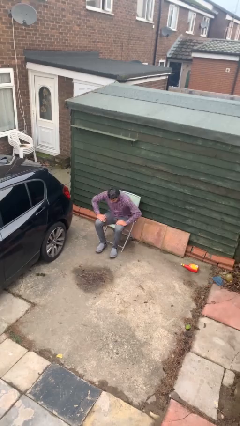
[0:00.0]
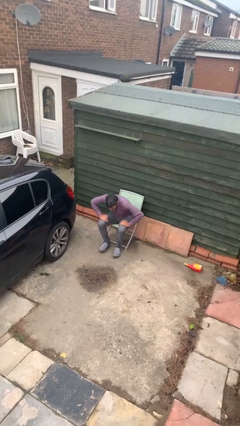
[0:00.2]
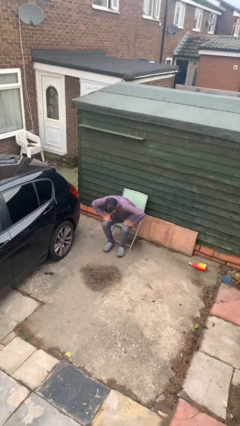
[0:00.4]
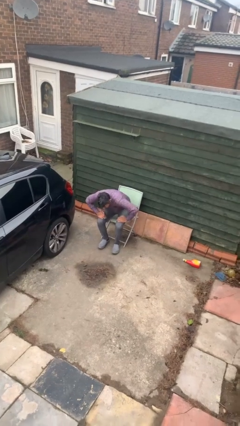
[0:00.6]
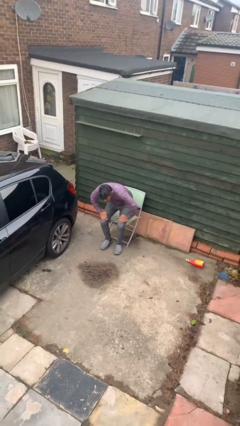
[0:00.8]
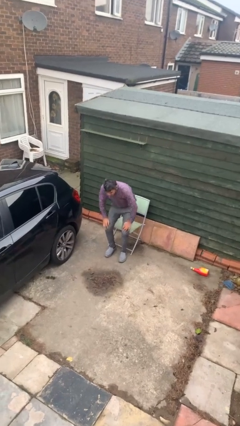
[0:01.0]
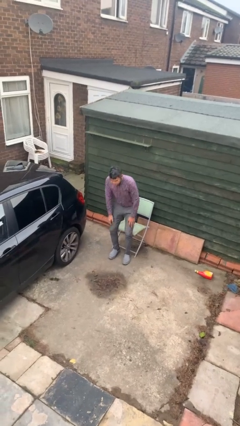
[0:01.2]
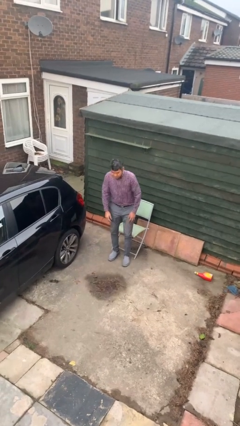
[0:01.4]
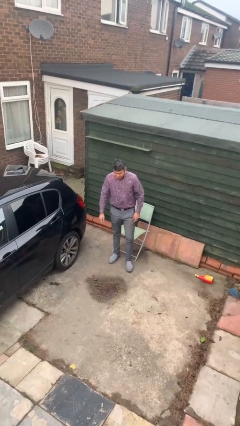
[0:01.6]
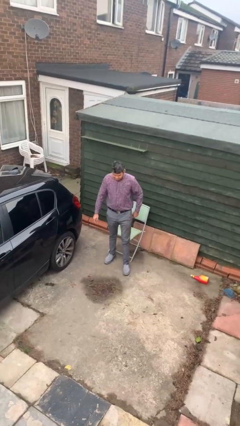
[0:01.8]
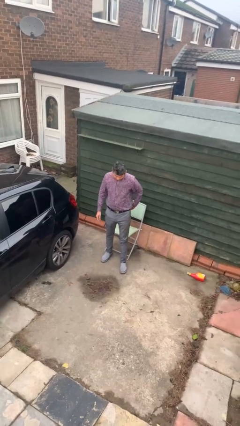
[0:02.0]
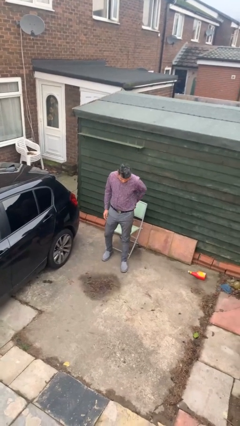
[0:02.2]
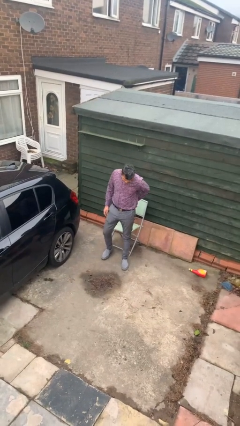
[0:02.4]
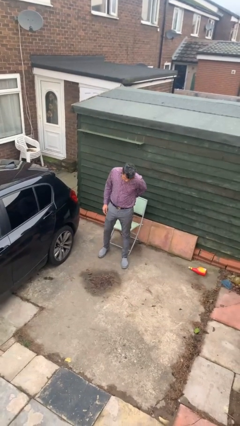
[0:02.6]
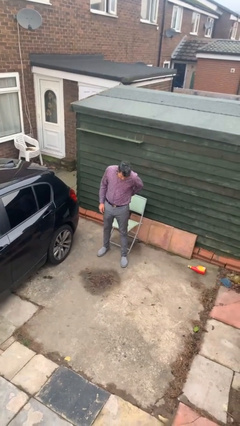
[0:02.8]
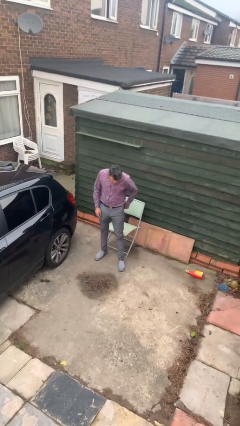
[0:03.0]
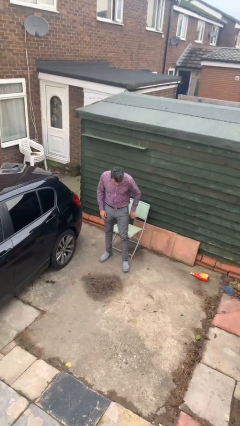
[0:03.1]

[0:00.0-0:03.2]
person stands up

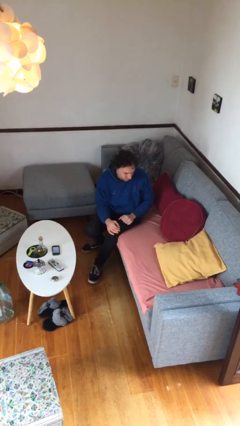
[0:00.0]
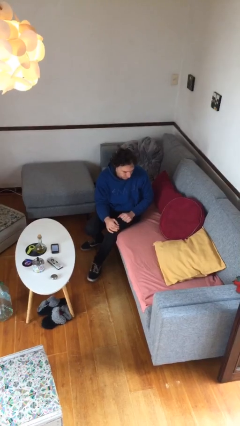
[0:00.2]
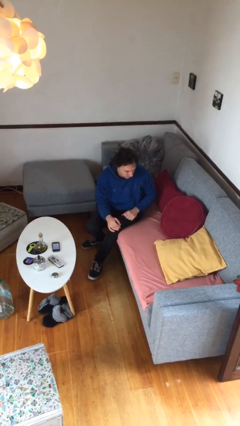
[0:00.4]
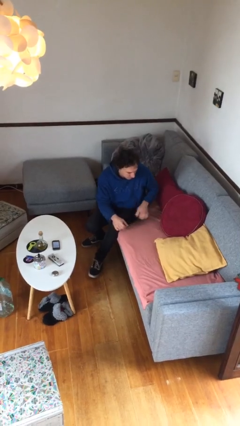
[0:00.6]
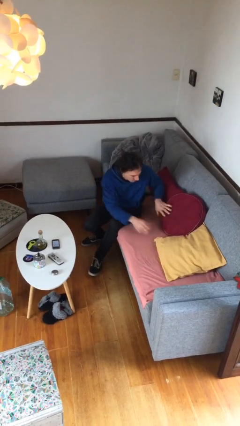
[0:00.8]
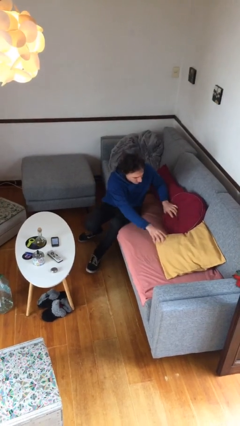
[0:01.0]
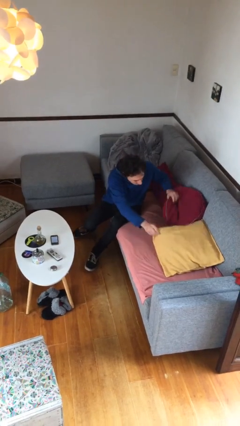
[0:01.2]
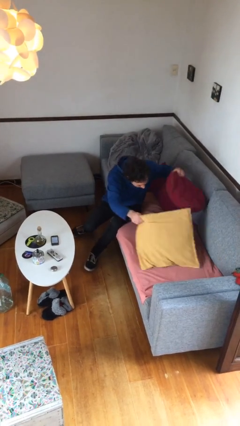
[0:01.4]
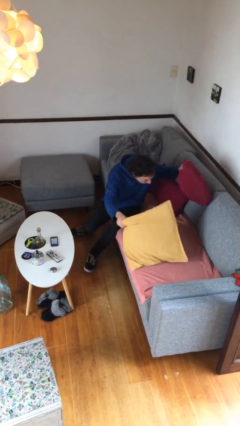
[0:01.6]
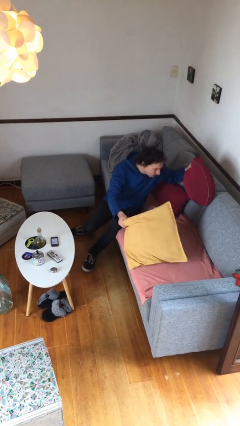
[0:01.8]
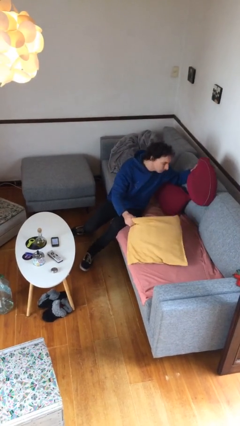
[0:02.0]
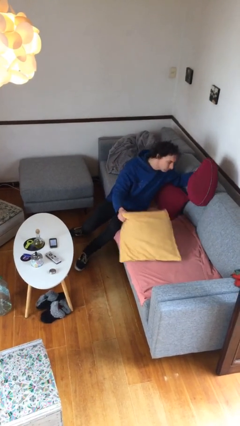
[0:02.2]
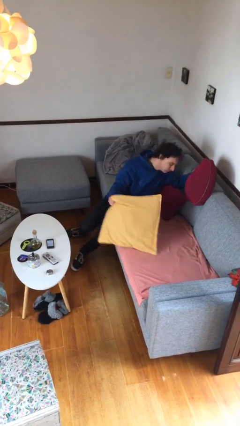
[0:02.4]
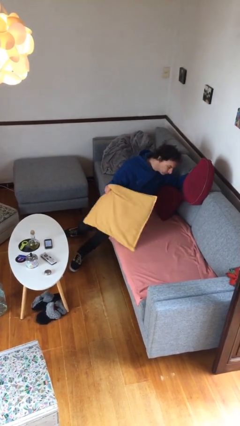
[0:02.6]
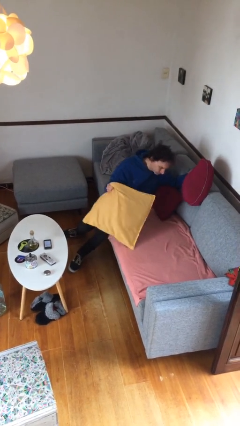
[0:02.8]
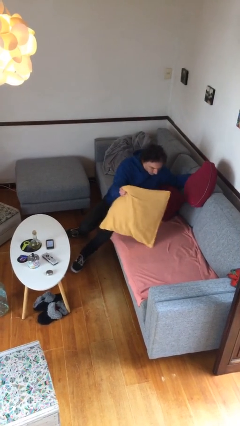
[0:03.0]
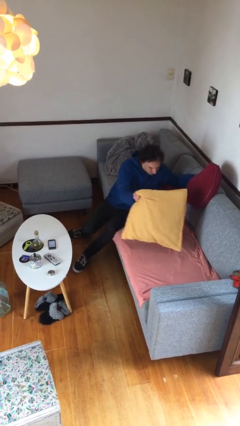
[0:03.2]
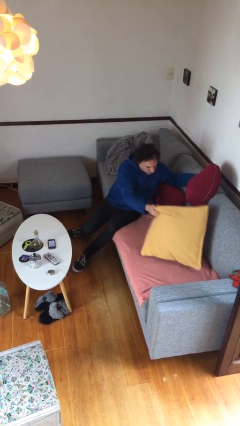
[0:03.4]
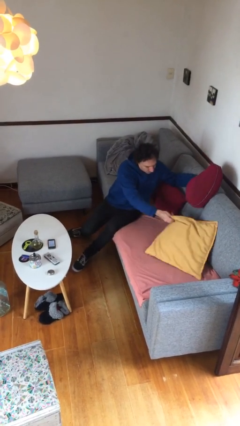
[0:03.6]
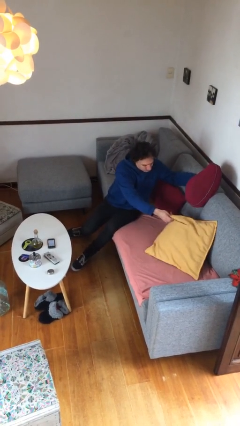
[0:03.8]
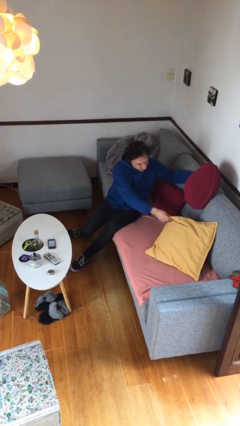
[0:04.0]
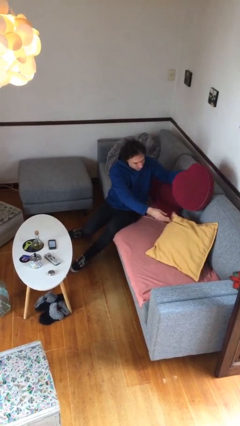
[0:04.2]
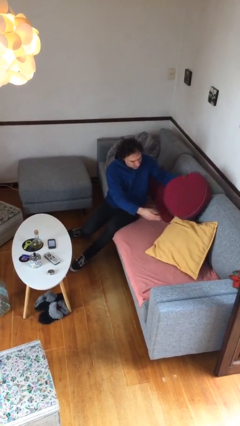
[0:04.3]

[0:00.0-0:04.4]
person searches in couch

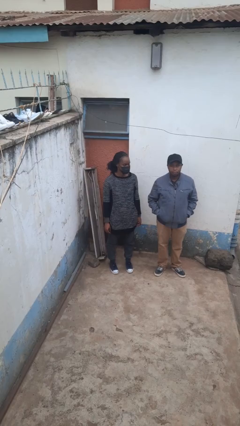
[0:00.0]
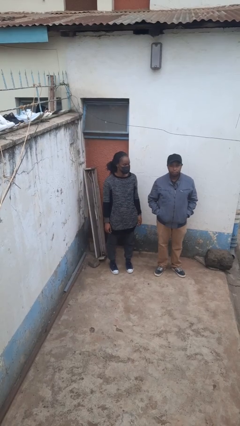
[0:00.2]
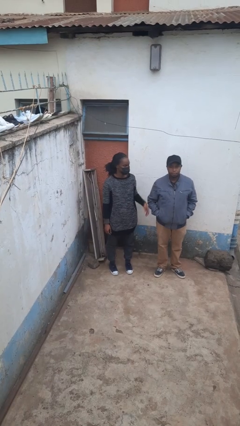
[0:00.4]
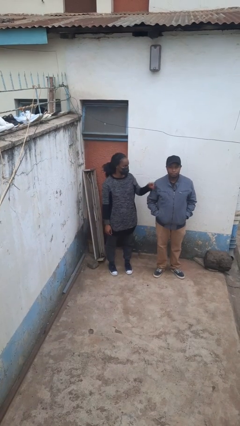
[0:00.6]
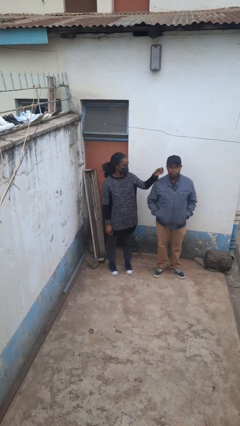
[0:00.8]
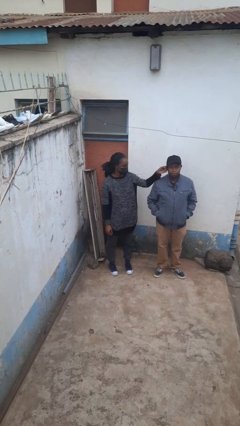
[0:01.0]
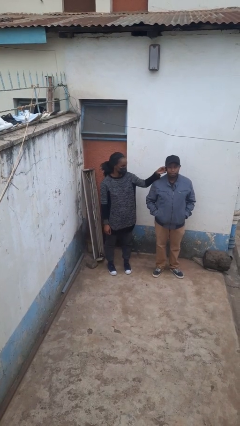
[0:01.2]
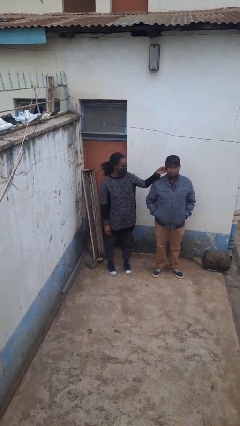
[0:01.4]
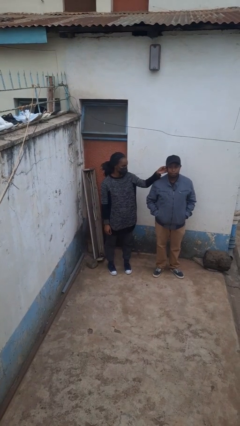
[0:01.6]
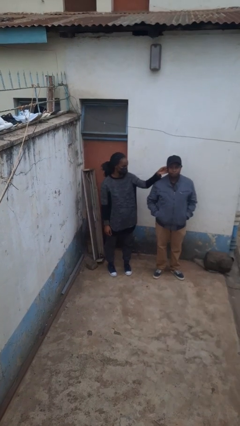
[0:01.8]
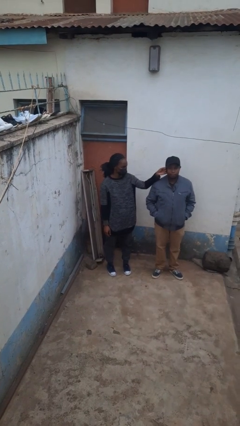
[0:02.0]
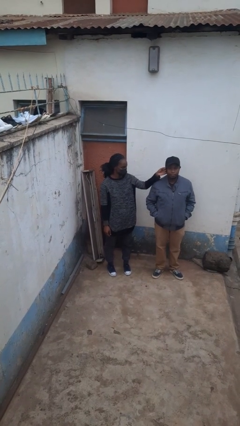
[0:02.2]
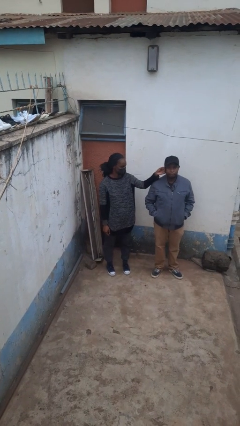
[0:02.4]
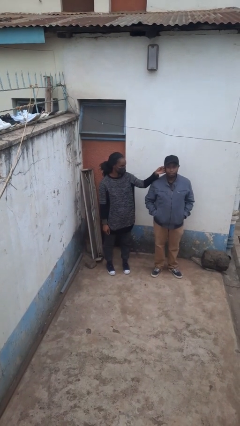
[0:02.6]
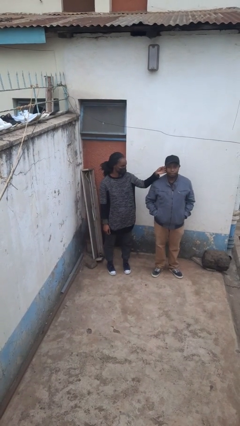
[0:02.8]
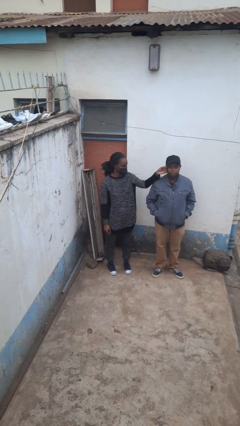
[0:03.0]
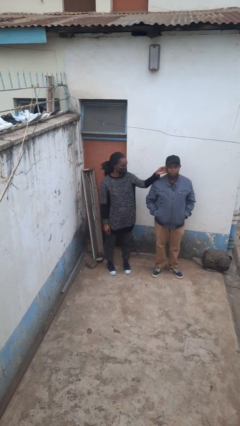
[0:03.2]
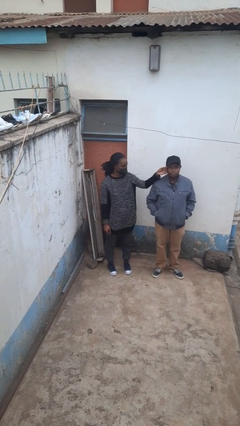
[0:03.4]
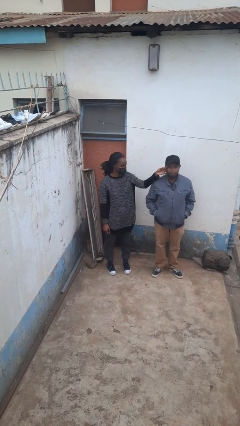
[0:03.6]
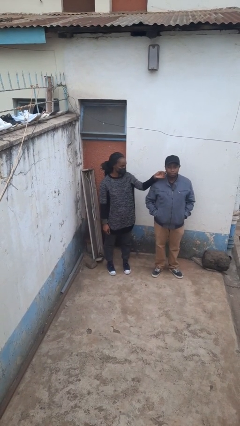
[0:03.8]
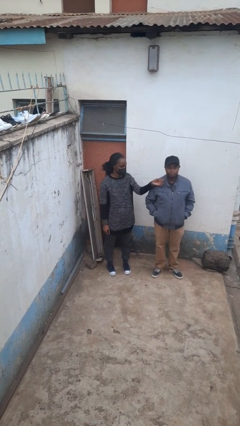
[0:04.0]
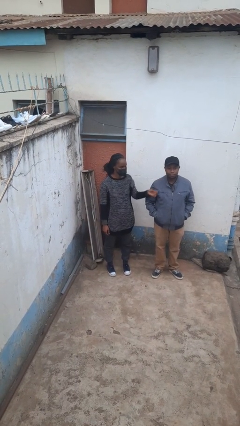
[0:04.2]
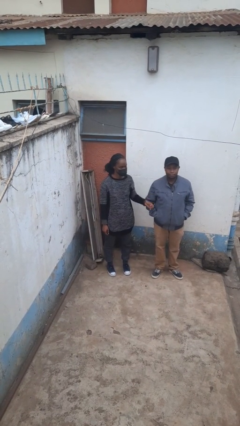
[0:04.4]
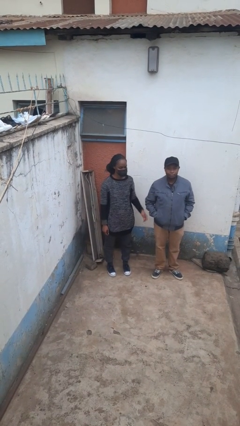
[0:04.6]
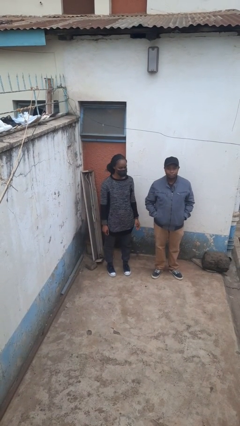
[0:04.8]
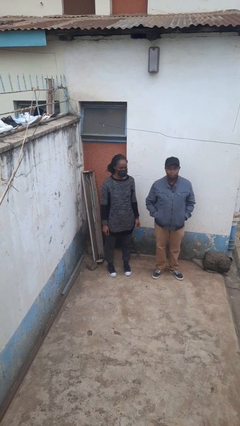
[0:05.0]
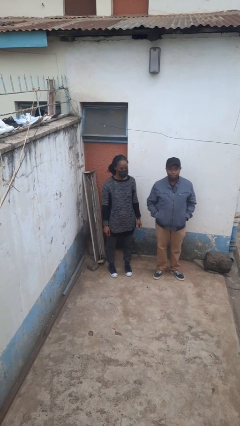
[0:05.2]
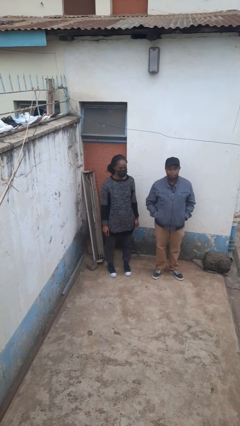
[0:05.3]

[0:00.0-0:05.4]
person touches face of person

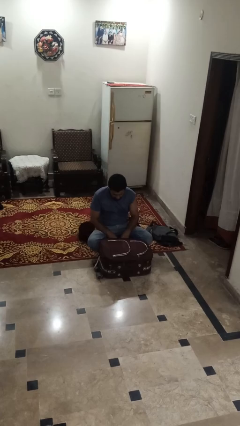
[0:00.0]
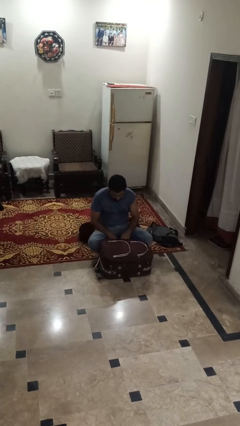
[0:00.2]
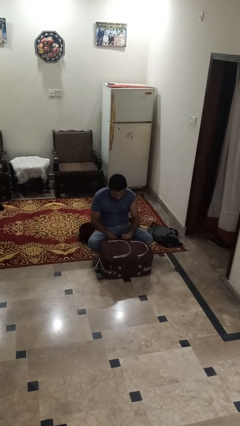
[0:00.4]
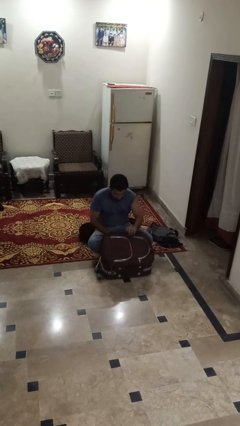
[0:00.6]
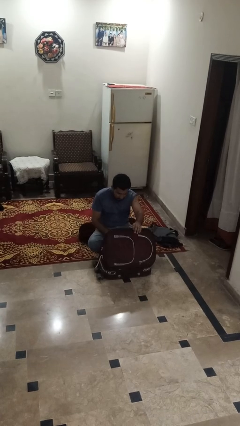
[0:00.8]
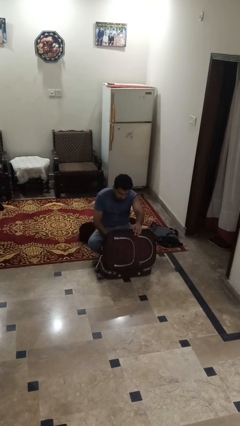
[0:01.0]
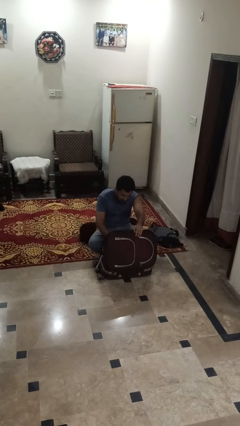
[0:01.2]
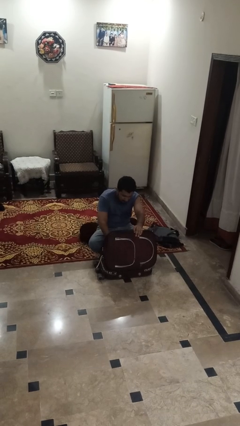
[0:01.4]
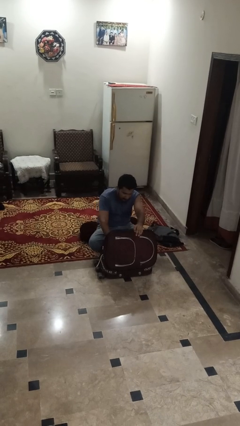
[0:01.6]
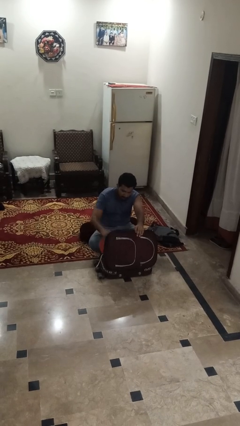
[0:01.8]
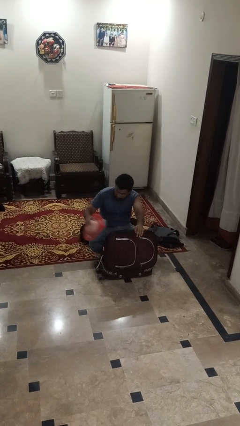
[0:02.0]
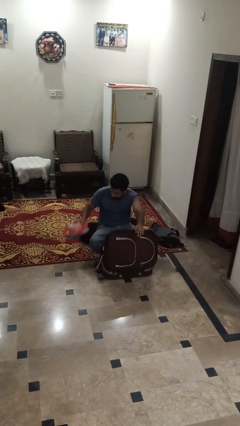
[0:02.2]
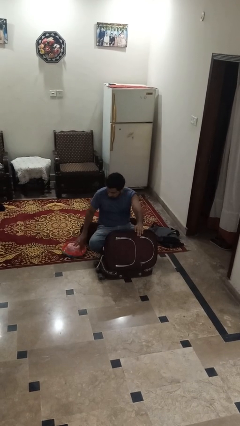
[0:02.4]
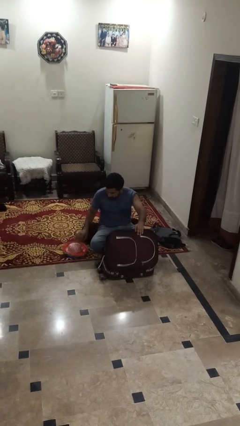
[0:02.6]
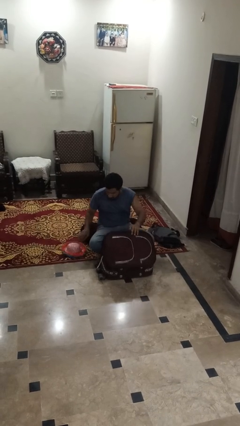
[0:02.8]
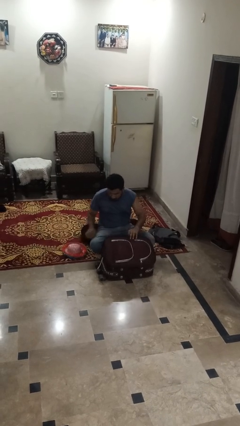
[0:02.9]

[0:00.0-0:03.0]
person unloads clothes from suitcase

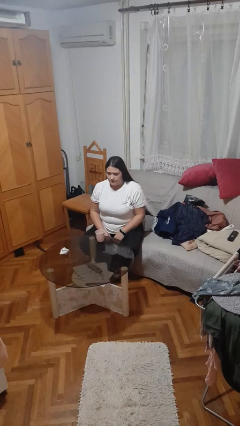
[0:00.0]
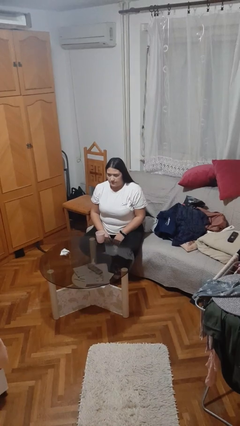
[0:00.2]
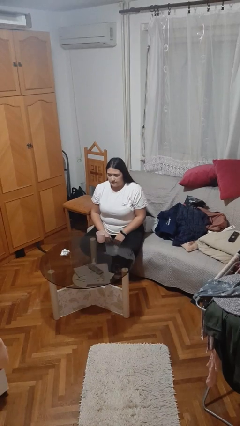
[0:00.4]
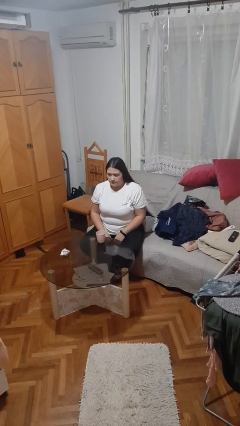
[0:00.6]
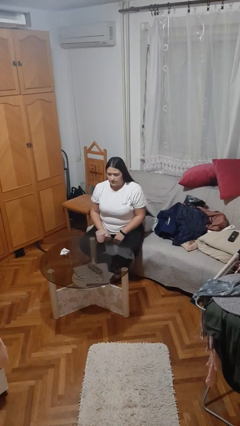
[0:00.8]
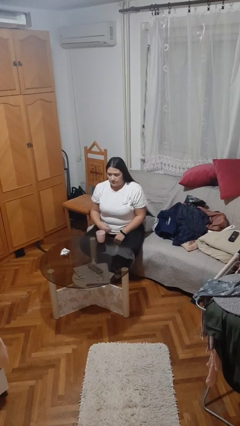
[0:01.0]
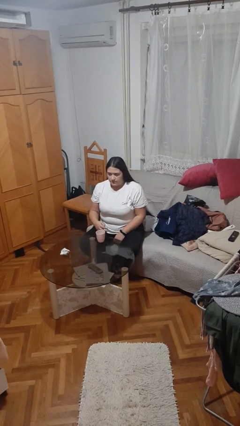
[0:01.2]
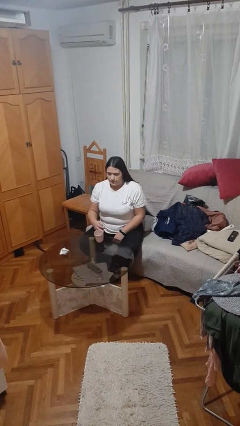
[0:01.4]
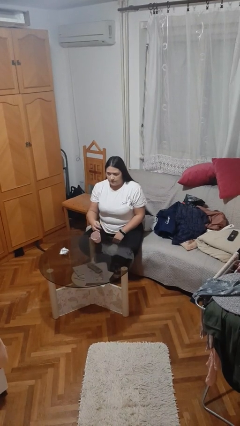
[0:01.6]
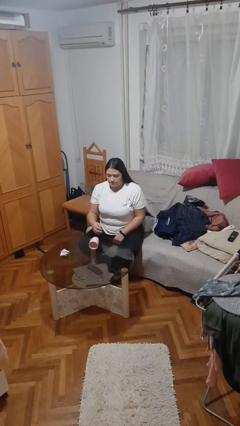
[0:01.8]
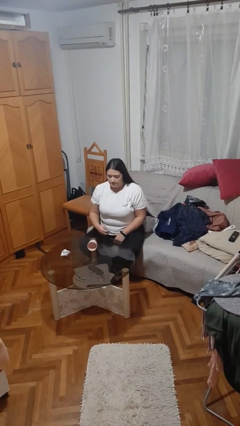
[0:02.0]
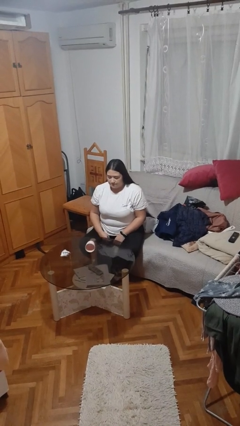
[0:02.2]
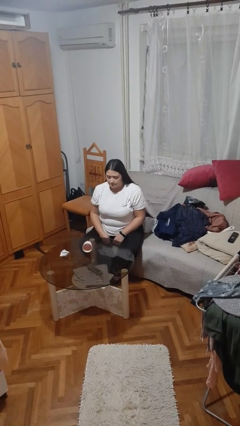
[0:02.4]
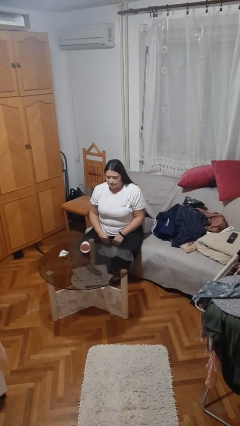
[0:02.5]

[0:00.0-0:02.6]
person spills on table
